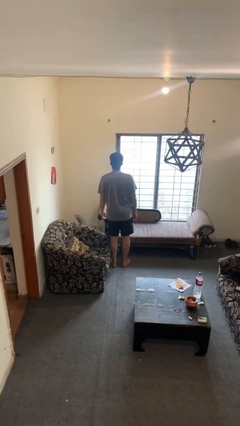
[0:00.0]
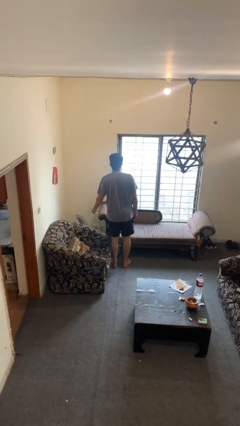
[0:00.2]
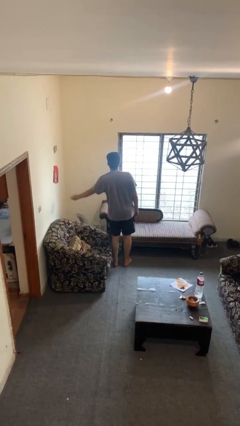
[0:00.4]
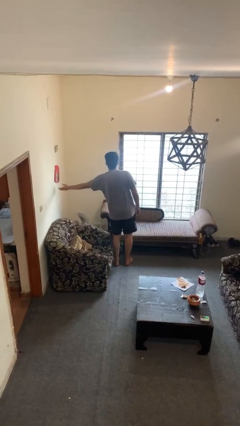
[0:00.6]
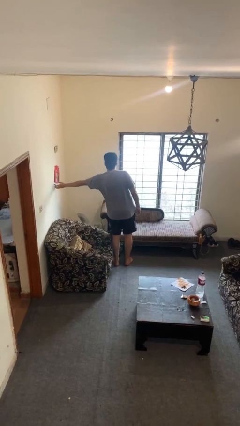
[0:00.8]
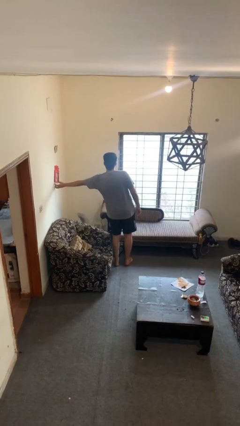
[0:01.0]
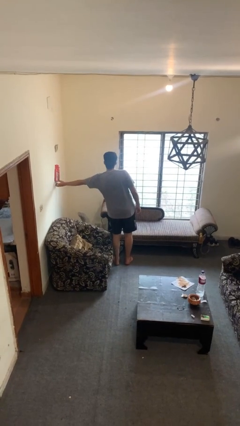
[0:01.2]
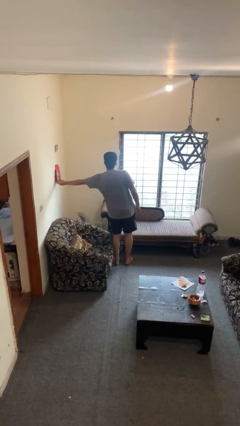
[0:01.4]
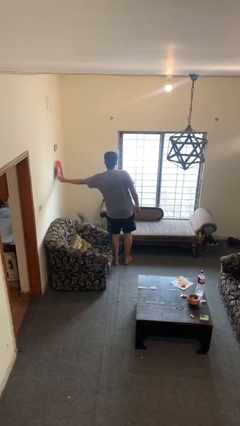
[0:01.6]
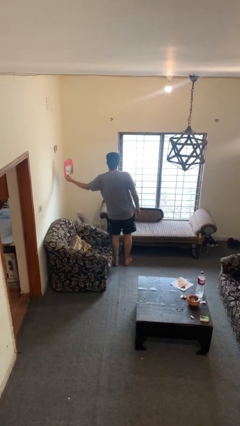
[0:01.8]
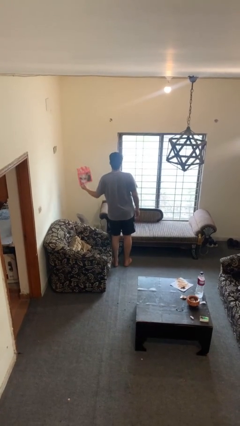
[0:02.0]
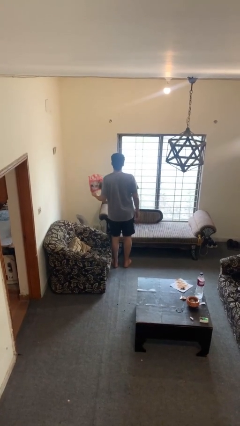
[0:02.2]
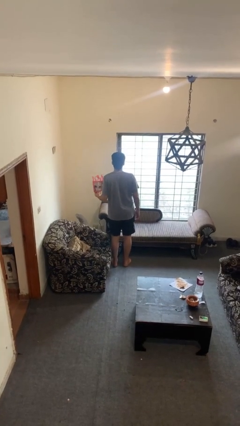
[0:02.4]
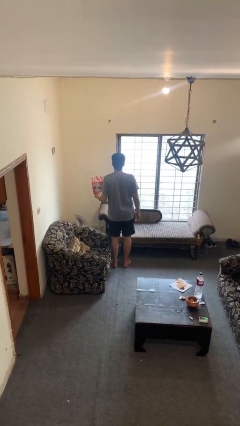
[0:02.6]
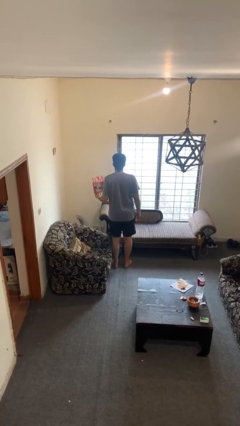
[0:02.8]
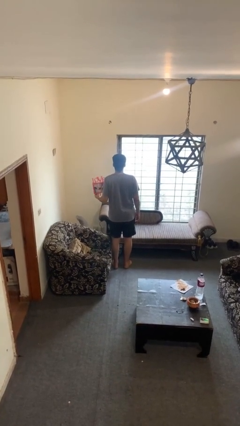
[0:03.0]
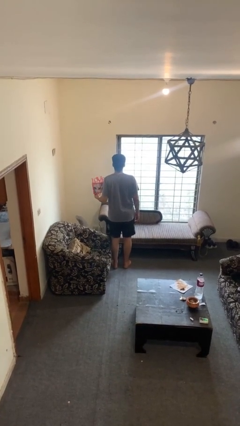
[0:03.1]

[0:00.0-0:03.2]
person takes down picture frame

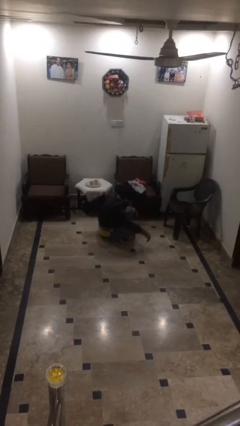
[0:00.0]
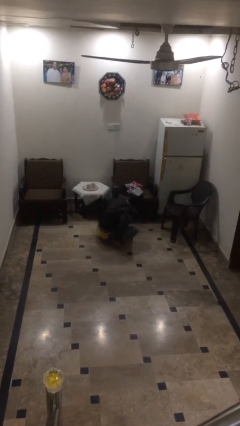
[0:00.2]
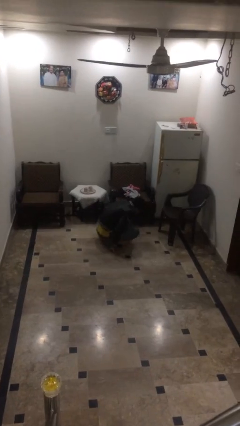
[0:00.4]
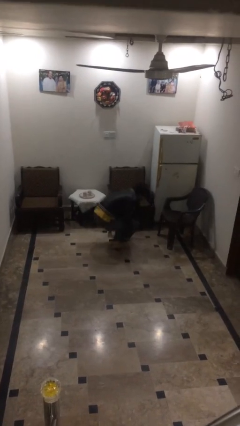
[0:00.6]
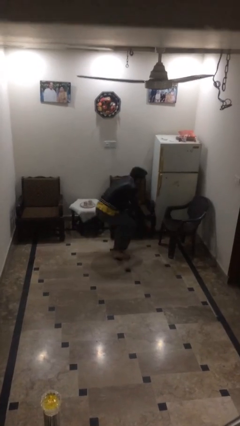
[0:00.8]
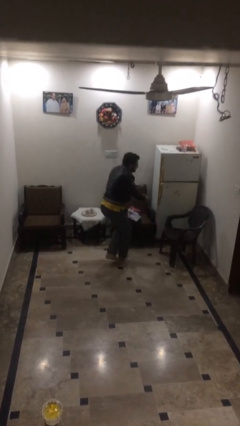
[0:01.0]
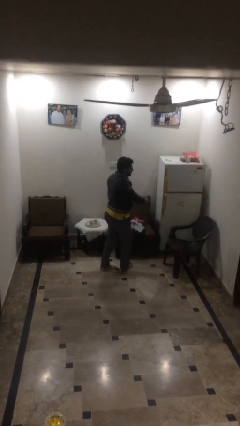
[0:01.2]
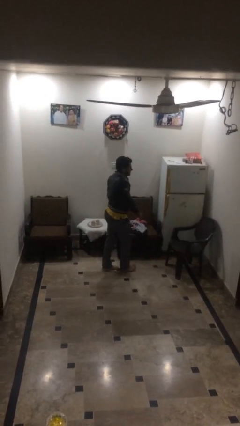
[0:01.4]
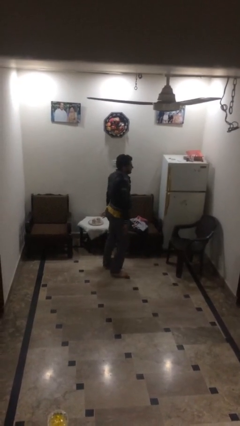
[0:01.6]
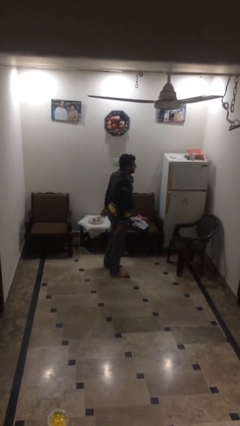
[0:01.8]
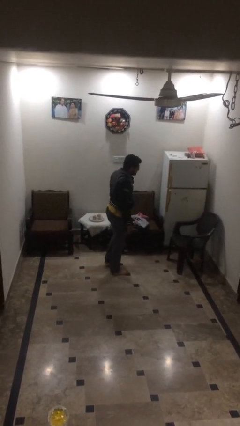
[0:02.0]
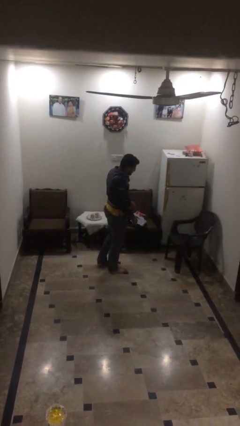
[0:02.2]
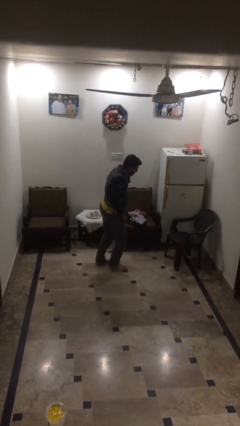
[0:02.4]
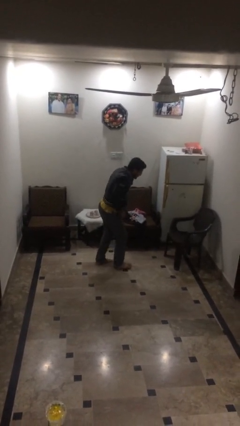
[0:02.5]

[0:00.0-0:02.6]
person stands up

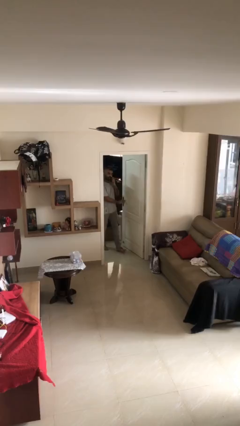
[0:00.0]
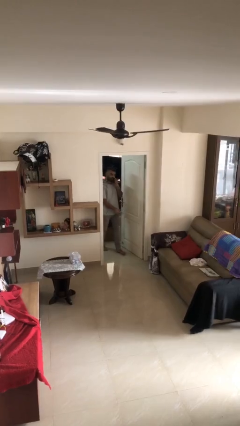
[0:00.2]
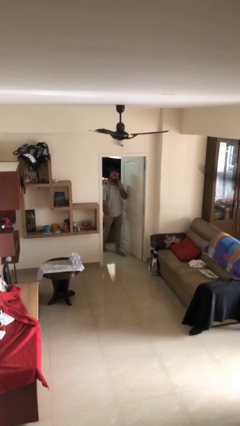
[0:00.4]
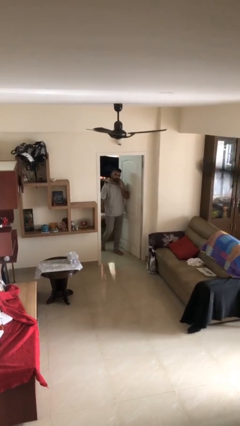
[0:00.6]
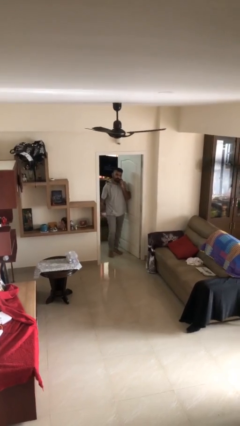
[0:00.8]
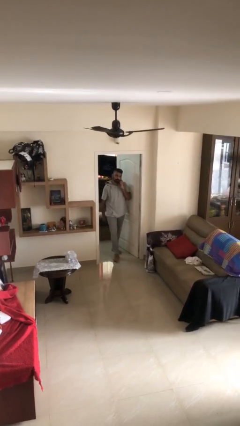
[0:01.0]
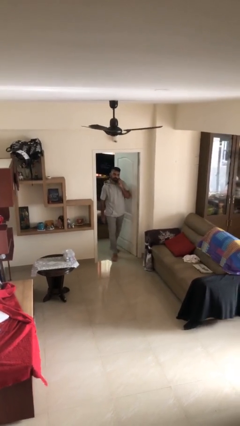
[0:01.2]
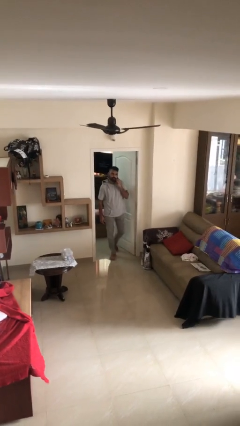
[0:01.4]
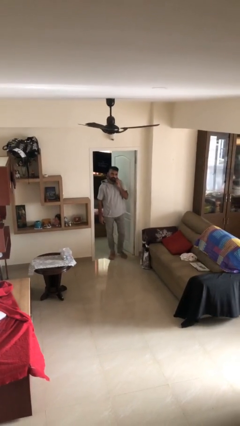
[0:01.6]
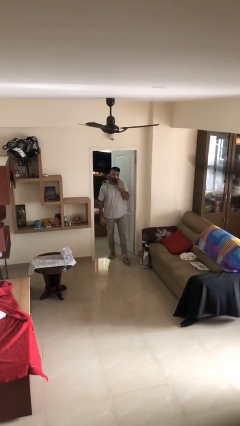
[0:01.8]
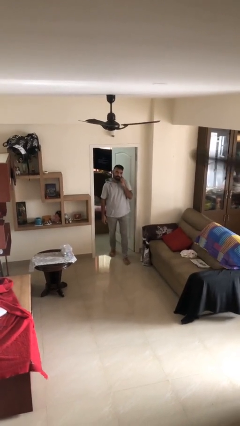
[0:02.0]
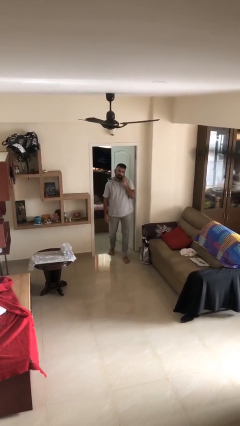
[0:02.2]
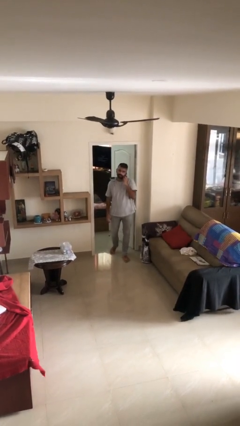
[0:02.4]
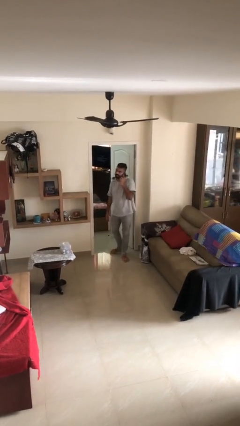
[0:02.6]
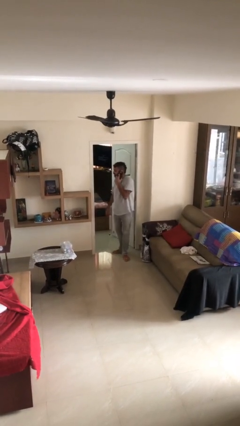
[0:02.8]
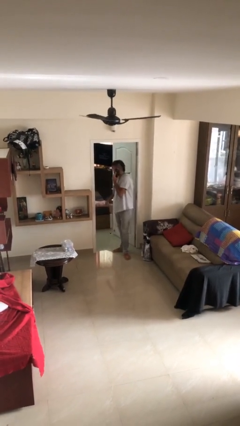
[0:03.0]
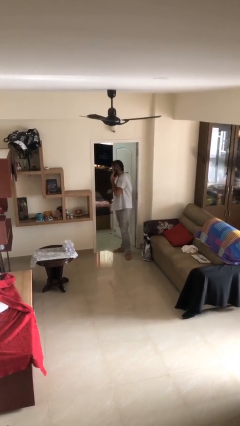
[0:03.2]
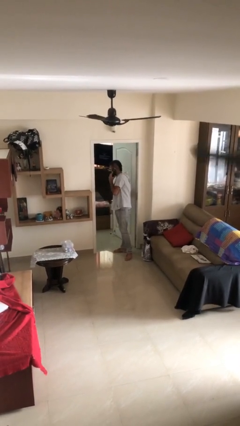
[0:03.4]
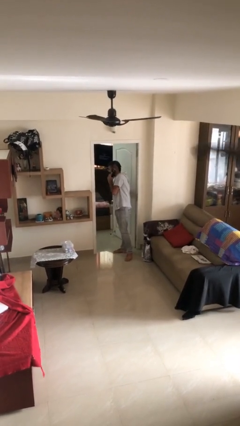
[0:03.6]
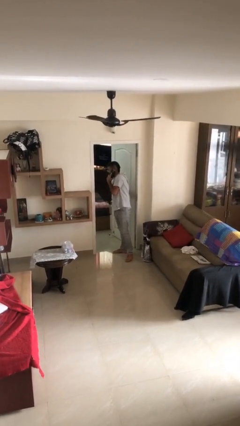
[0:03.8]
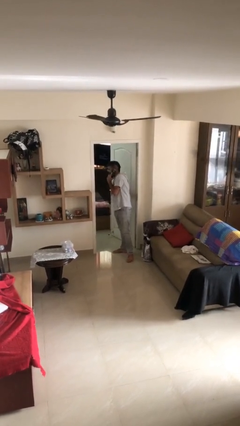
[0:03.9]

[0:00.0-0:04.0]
person enters scene through structure

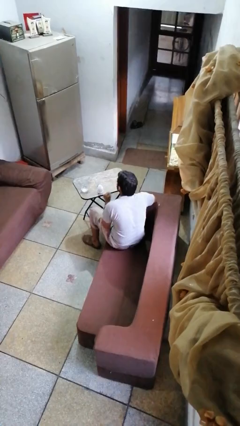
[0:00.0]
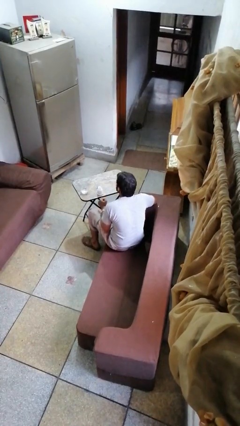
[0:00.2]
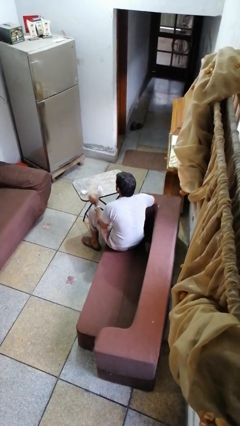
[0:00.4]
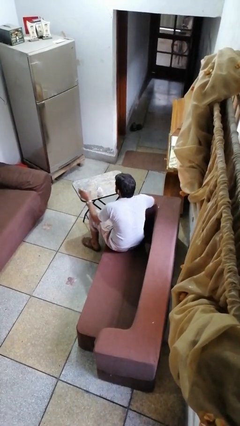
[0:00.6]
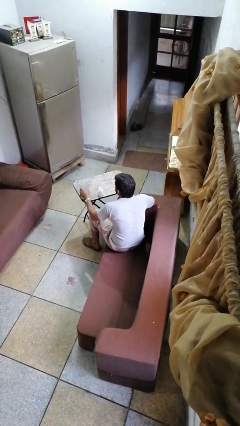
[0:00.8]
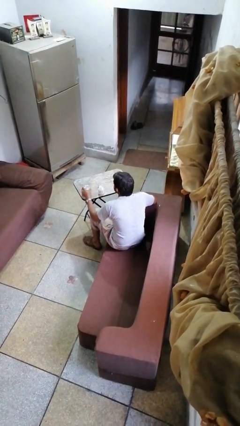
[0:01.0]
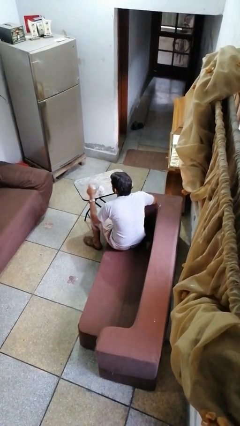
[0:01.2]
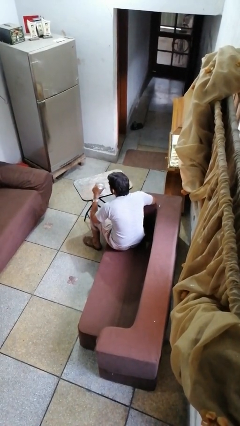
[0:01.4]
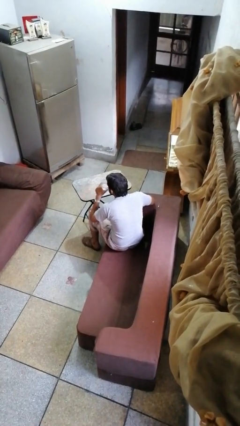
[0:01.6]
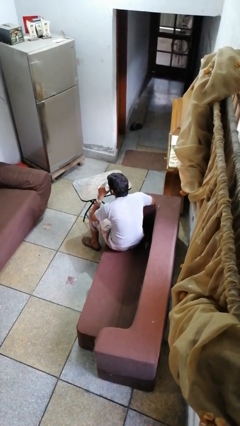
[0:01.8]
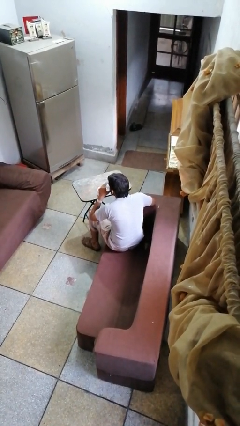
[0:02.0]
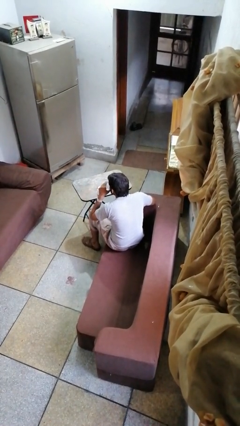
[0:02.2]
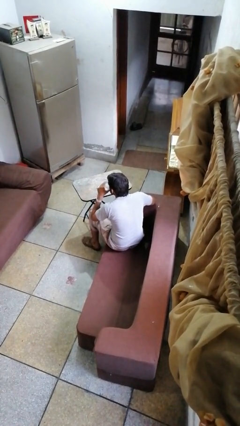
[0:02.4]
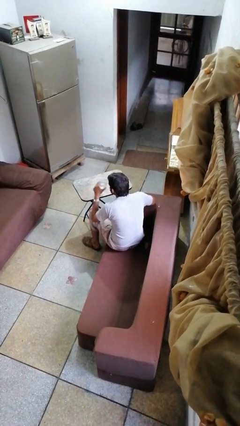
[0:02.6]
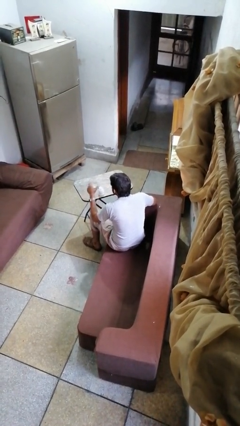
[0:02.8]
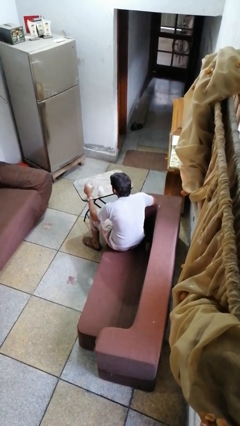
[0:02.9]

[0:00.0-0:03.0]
person drinks from cup

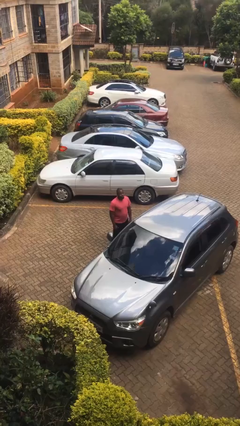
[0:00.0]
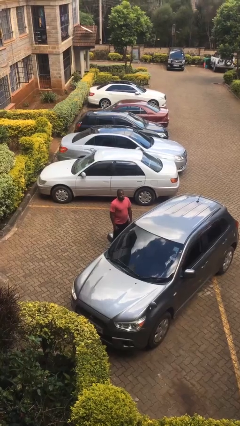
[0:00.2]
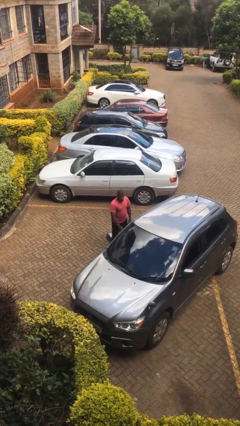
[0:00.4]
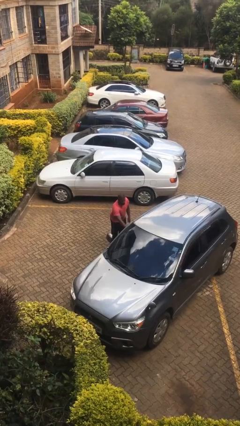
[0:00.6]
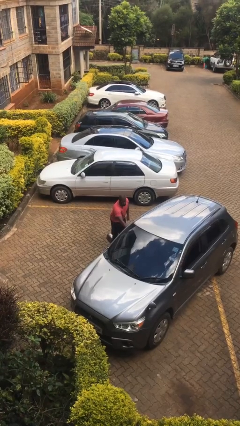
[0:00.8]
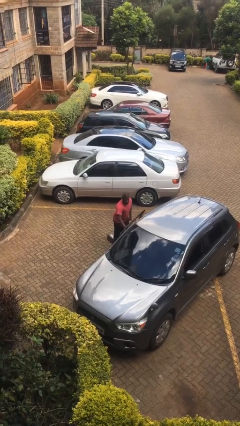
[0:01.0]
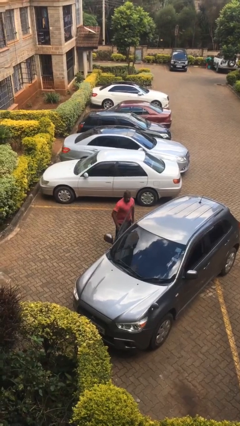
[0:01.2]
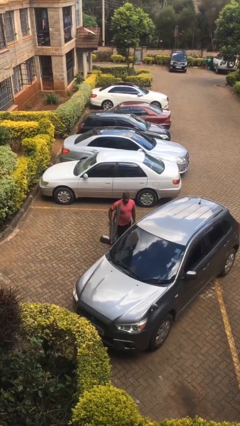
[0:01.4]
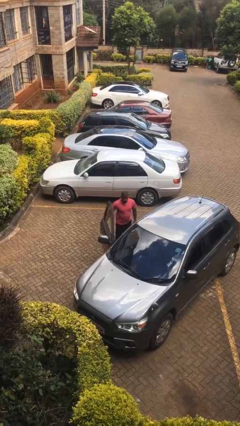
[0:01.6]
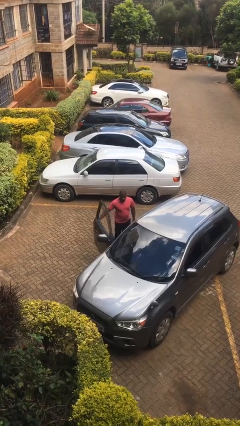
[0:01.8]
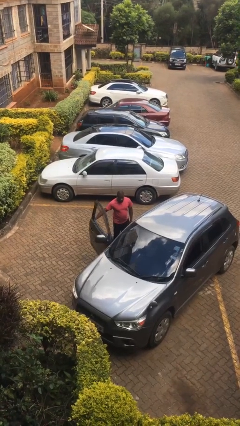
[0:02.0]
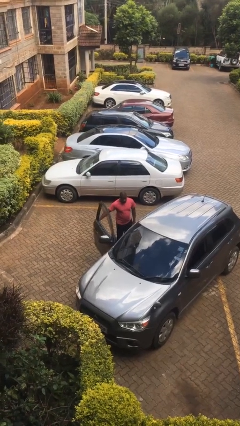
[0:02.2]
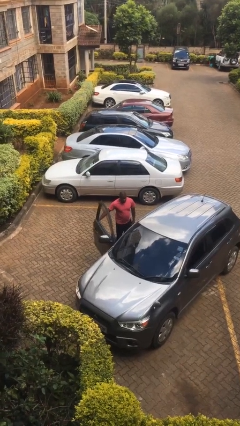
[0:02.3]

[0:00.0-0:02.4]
person opens car door

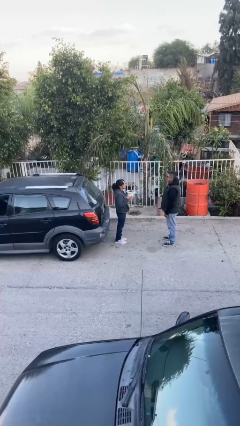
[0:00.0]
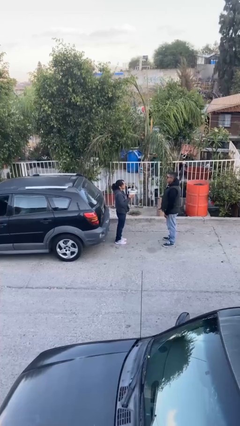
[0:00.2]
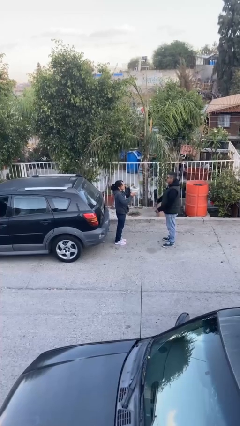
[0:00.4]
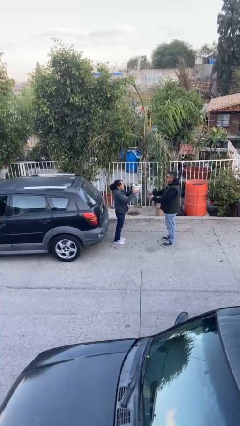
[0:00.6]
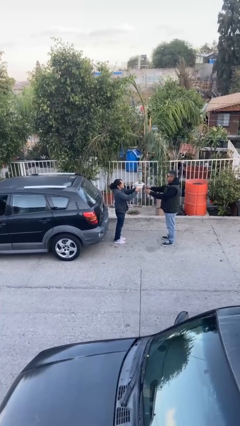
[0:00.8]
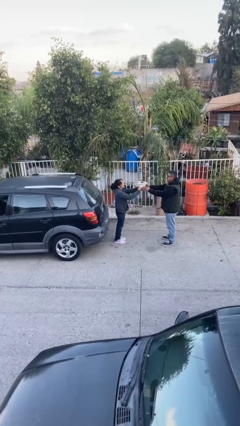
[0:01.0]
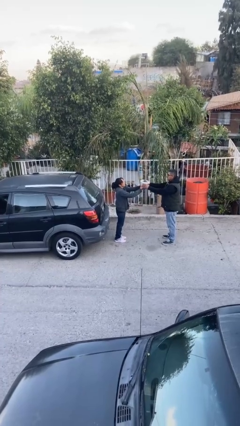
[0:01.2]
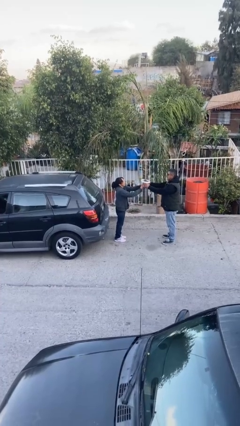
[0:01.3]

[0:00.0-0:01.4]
person transfers object to person

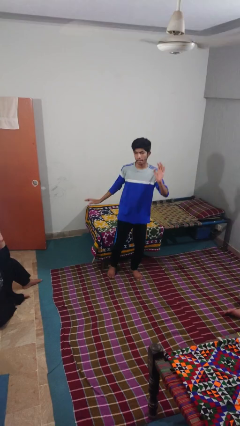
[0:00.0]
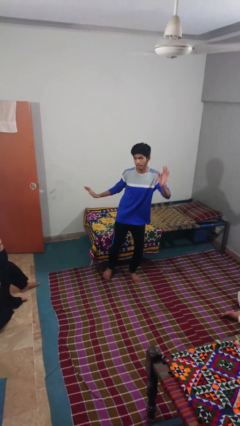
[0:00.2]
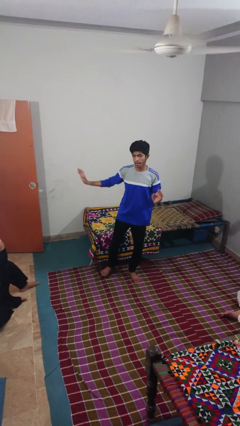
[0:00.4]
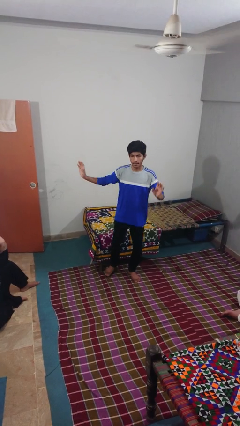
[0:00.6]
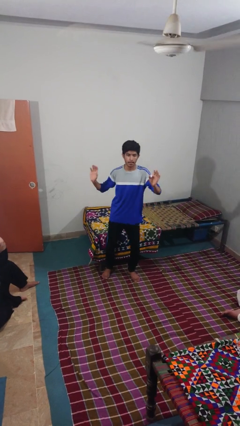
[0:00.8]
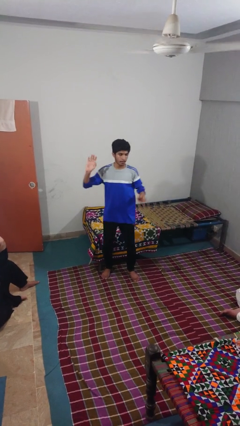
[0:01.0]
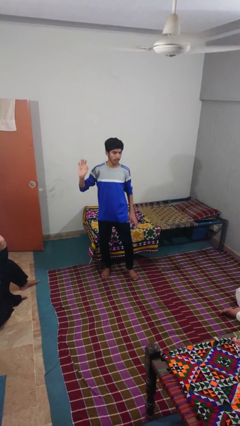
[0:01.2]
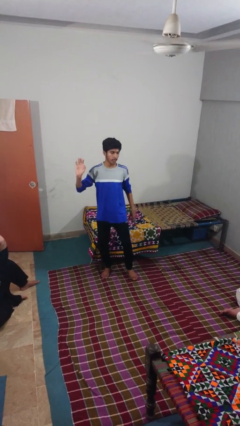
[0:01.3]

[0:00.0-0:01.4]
person dances in place
